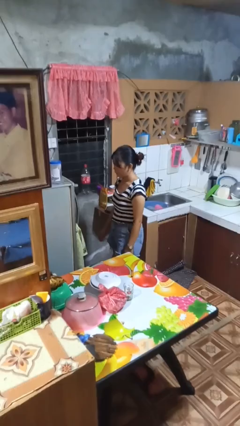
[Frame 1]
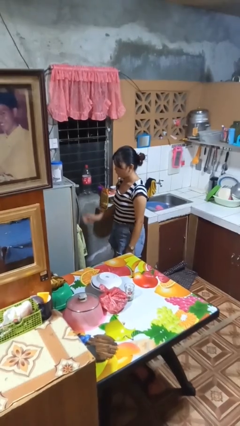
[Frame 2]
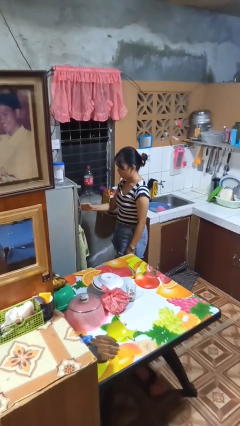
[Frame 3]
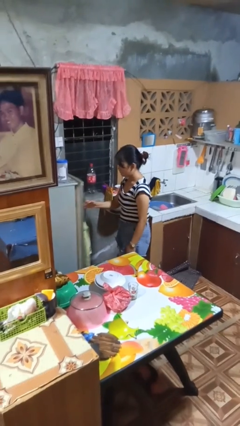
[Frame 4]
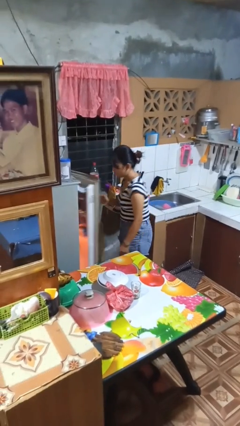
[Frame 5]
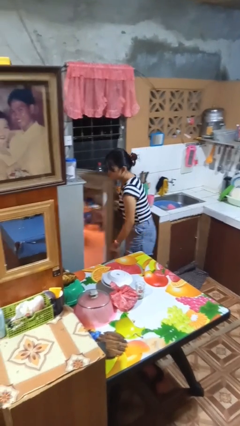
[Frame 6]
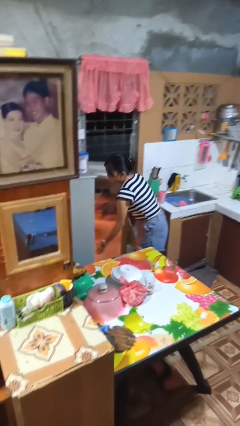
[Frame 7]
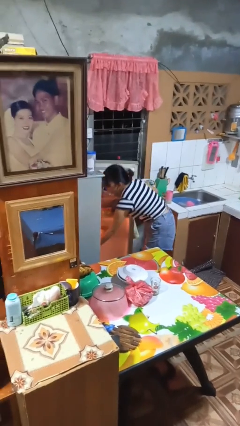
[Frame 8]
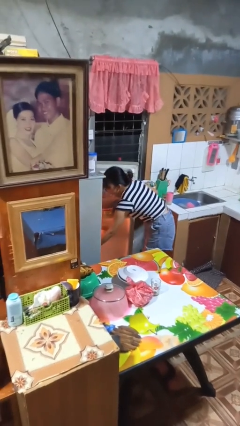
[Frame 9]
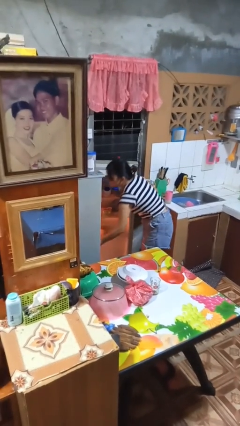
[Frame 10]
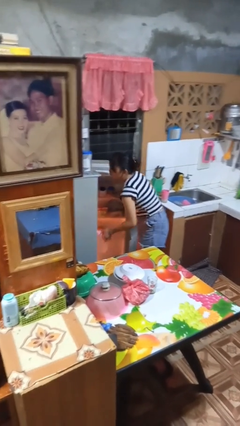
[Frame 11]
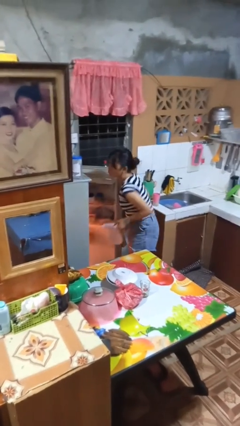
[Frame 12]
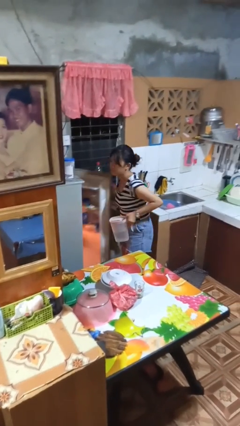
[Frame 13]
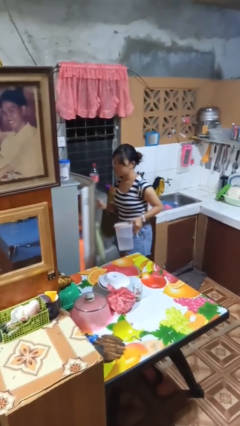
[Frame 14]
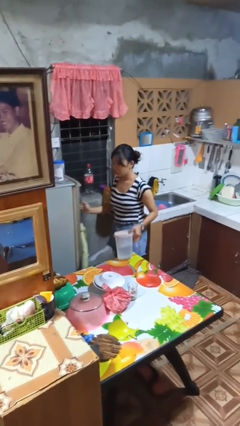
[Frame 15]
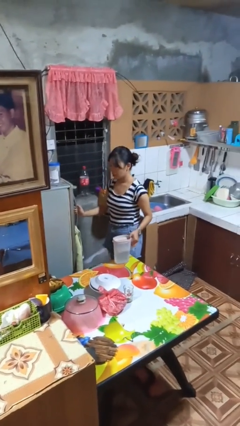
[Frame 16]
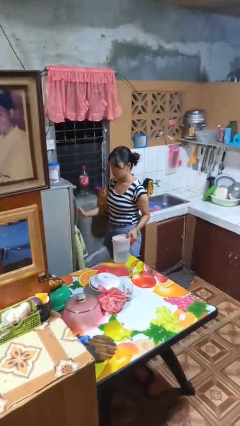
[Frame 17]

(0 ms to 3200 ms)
person takes object from refrigerator

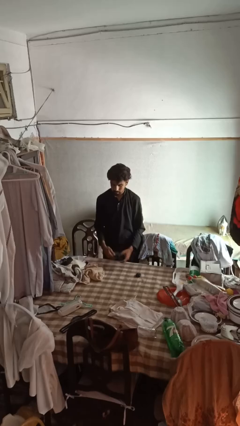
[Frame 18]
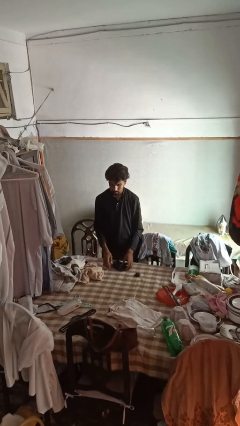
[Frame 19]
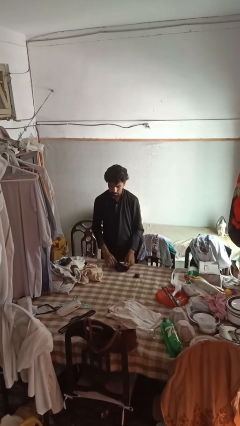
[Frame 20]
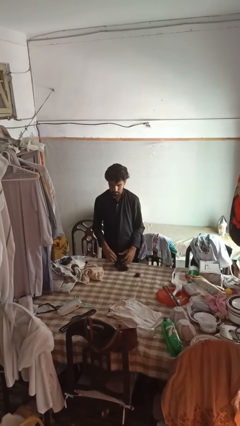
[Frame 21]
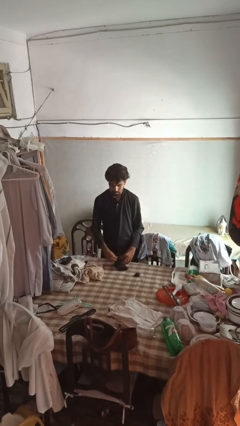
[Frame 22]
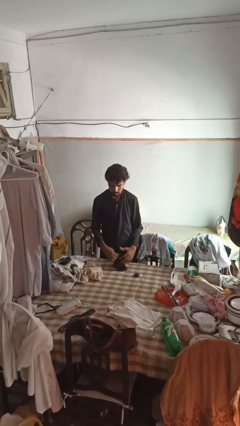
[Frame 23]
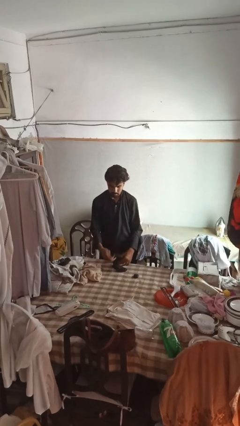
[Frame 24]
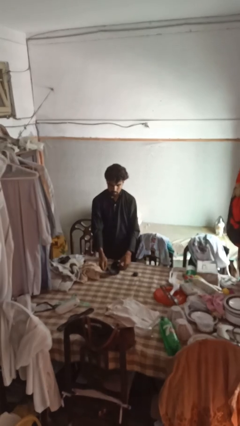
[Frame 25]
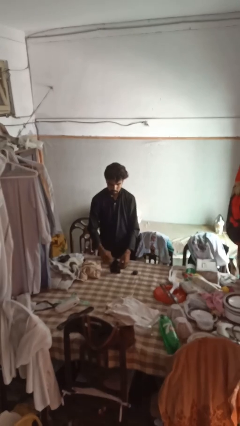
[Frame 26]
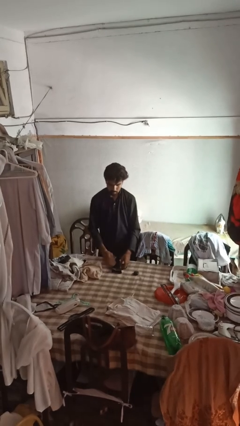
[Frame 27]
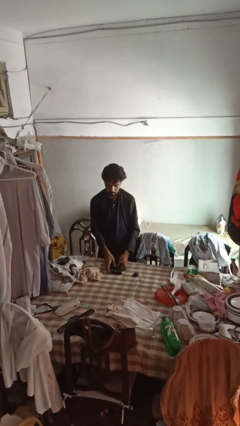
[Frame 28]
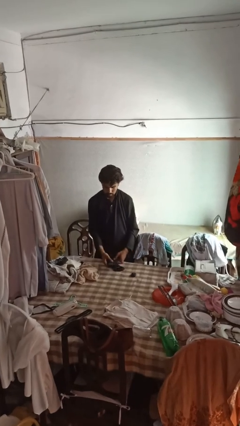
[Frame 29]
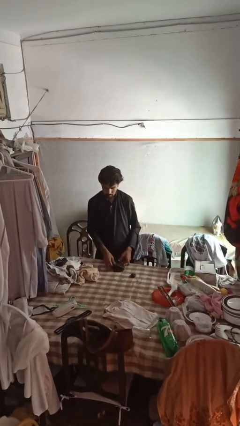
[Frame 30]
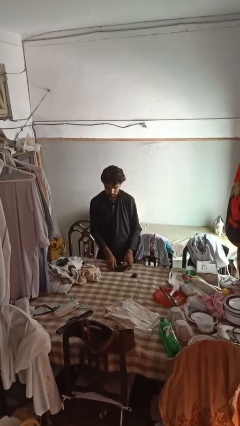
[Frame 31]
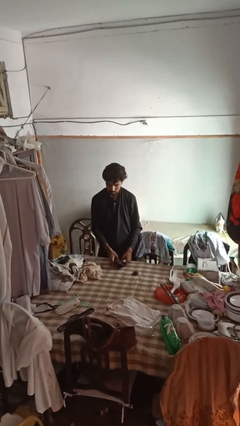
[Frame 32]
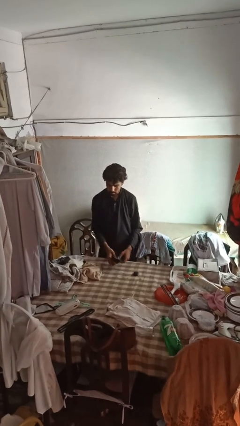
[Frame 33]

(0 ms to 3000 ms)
person folds socks

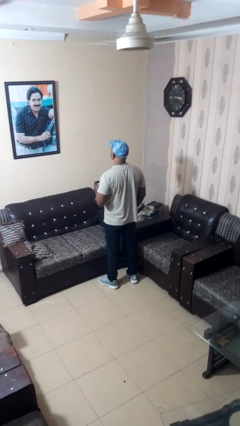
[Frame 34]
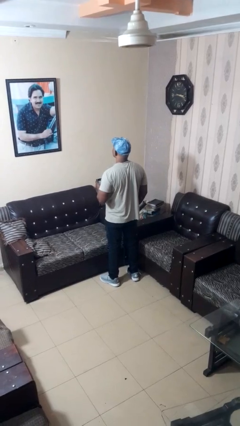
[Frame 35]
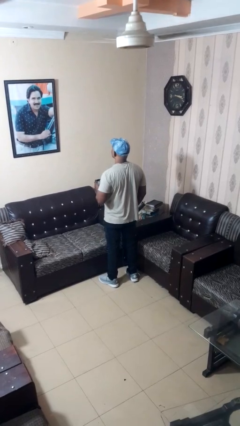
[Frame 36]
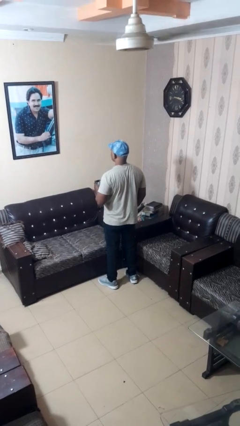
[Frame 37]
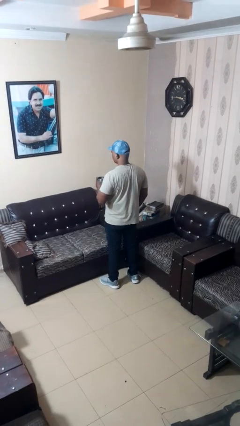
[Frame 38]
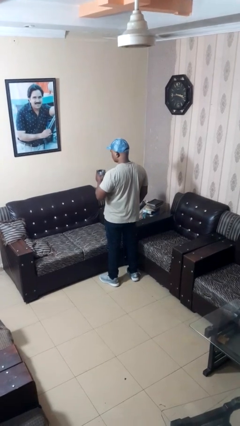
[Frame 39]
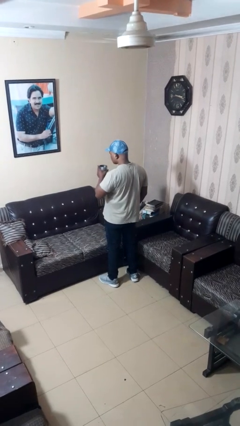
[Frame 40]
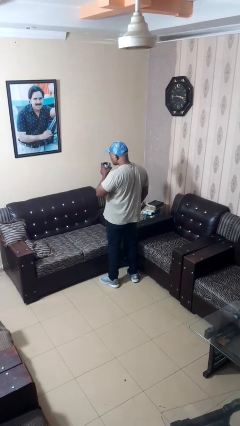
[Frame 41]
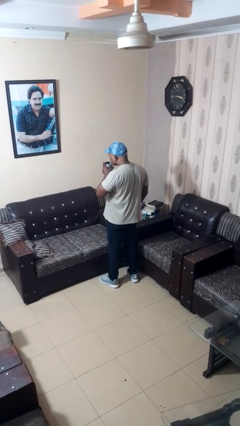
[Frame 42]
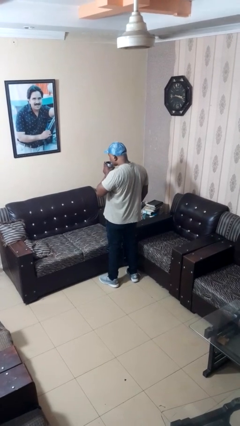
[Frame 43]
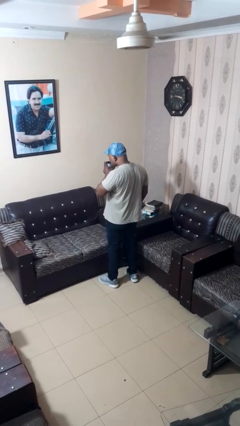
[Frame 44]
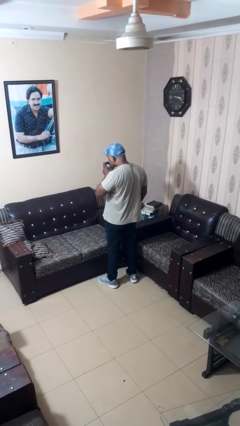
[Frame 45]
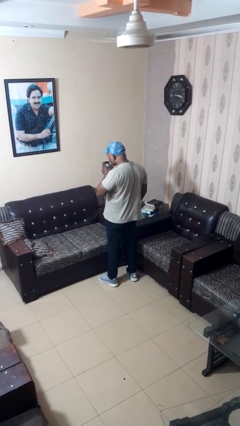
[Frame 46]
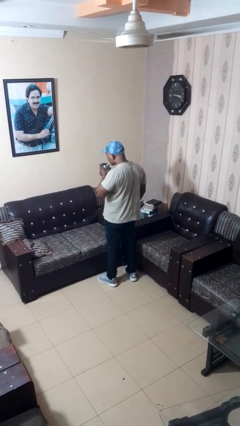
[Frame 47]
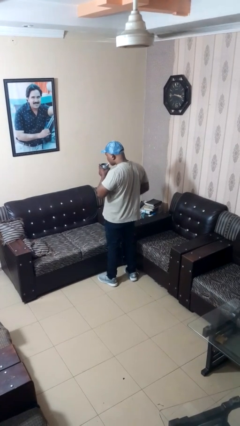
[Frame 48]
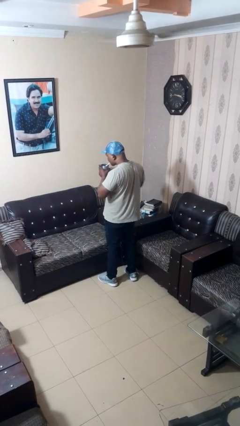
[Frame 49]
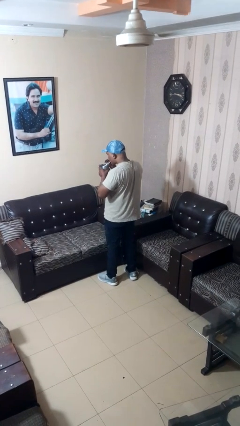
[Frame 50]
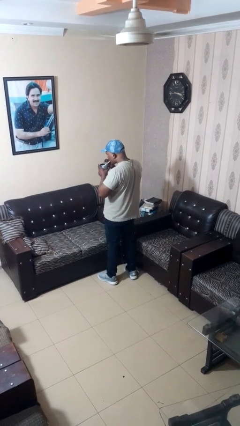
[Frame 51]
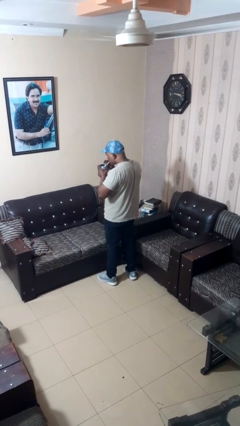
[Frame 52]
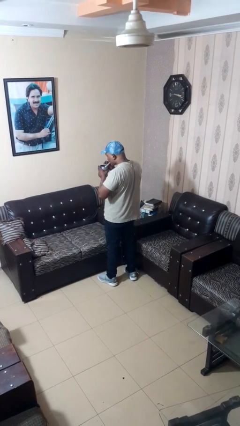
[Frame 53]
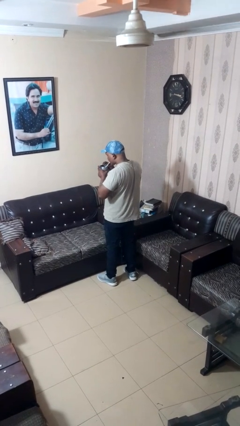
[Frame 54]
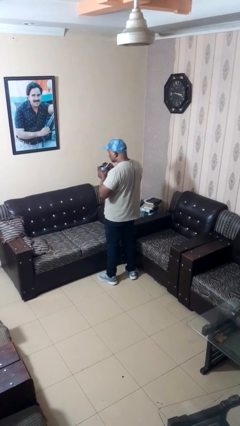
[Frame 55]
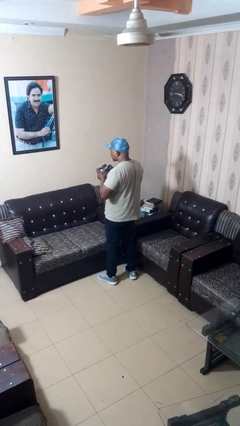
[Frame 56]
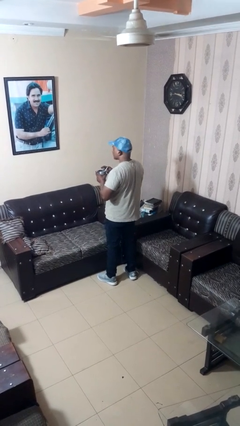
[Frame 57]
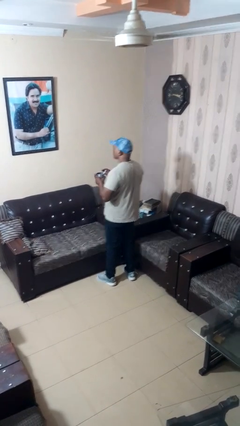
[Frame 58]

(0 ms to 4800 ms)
person drinks from straw

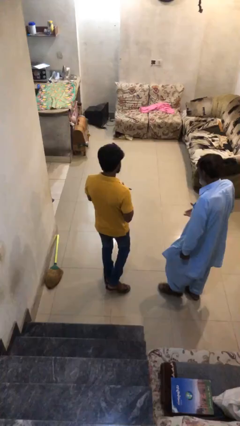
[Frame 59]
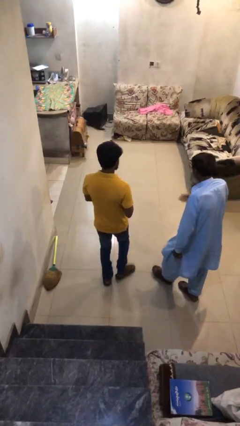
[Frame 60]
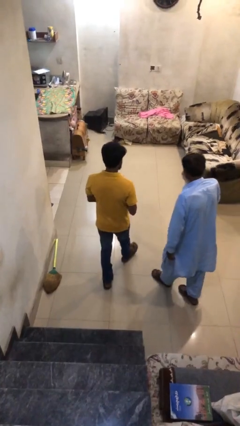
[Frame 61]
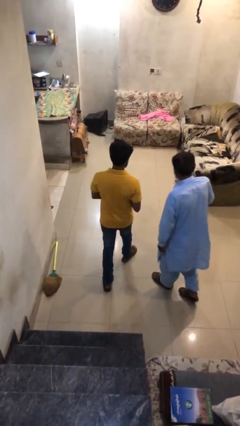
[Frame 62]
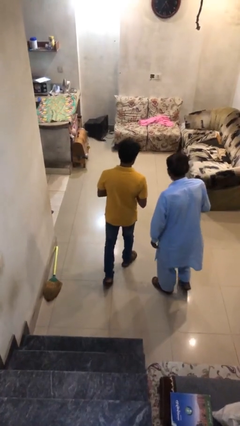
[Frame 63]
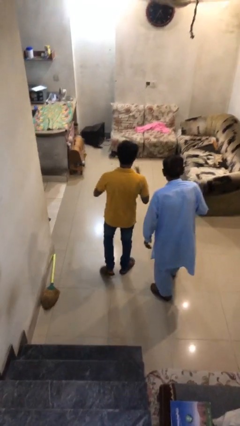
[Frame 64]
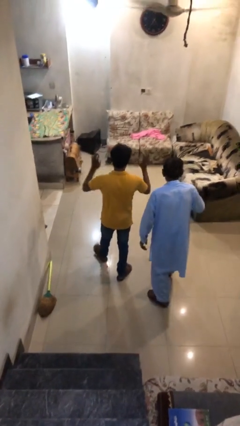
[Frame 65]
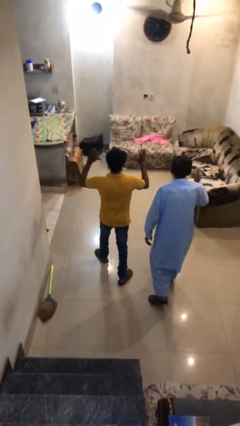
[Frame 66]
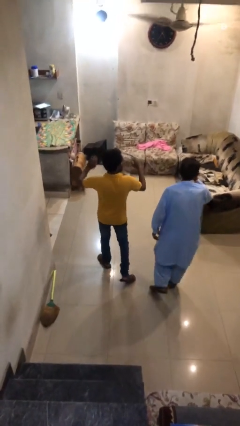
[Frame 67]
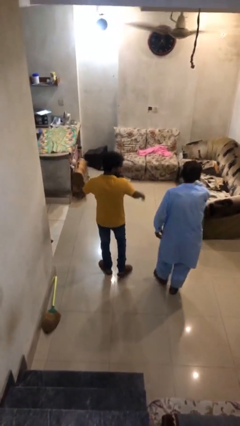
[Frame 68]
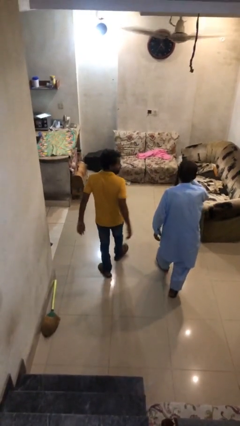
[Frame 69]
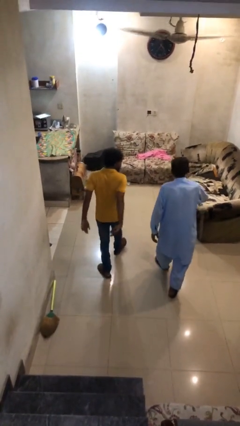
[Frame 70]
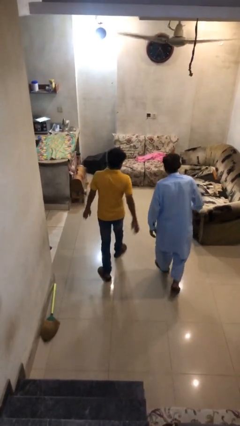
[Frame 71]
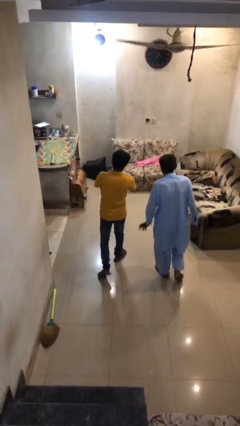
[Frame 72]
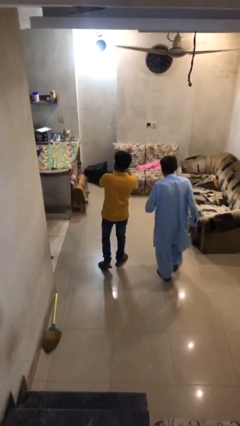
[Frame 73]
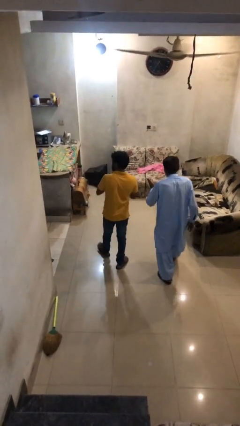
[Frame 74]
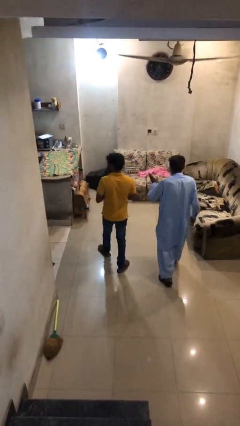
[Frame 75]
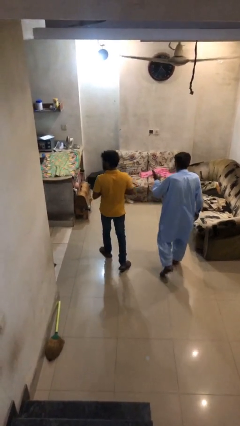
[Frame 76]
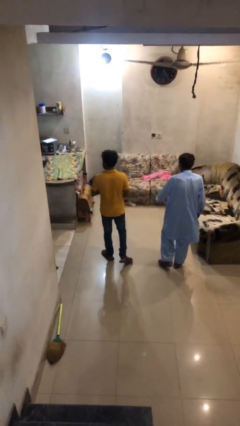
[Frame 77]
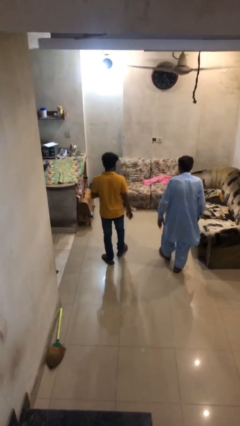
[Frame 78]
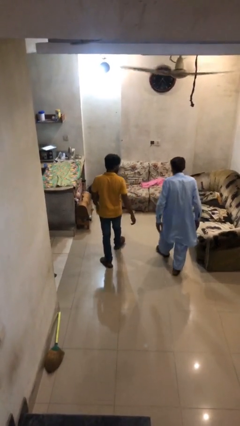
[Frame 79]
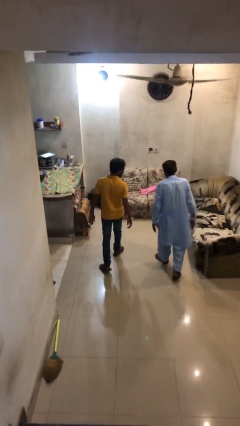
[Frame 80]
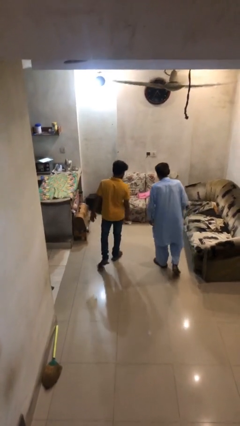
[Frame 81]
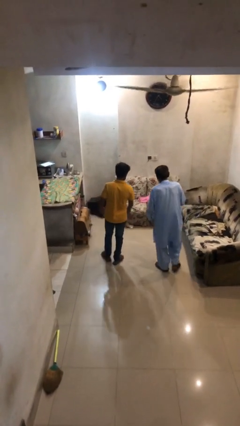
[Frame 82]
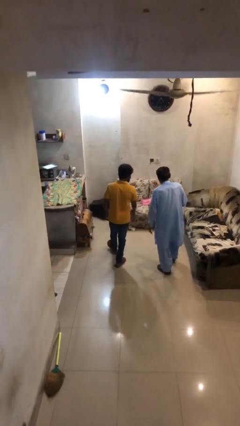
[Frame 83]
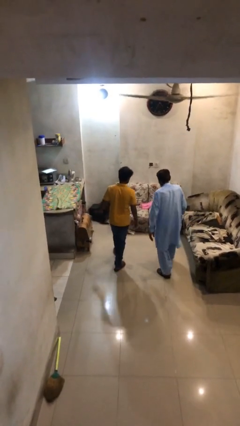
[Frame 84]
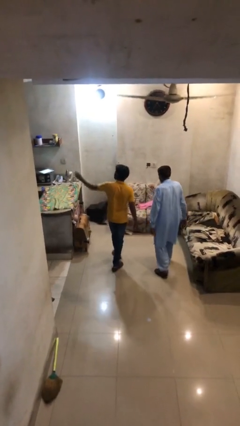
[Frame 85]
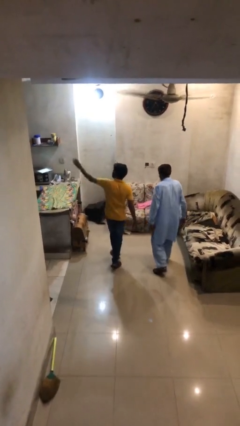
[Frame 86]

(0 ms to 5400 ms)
person talks to person

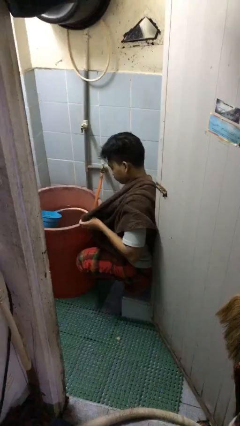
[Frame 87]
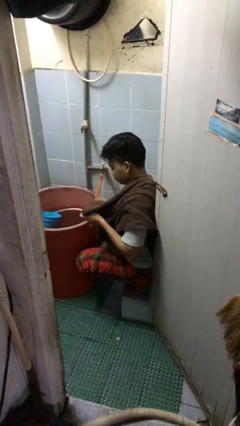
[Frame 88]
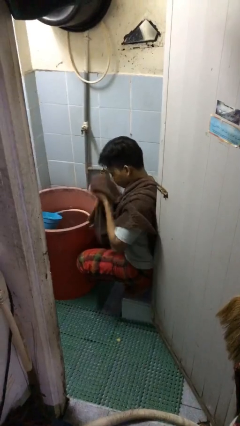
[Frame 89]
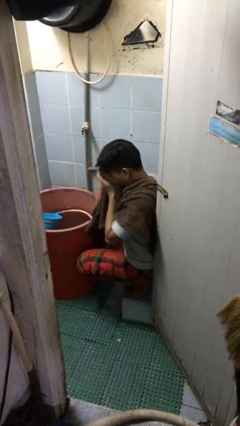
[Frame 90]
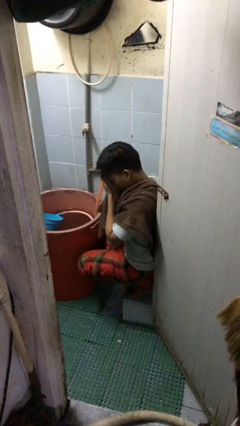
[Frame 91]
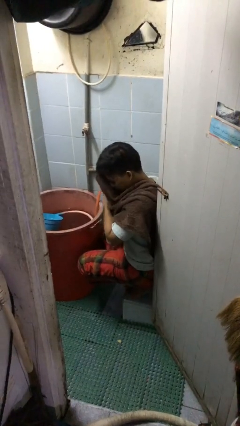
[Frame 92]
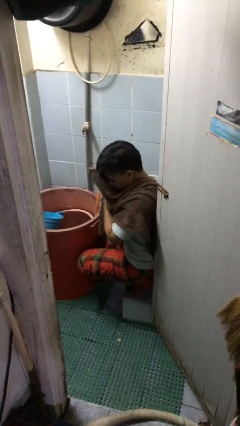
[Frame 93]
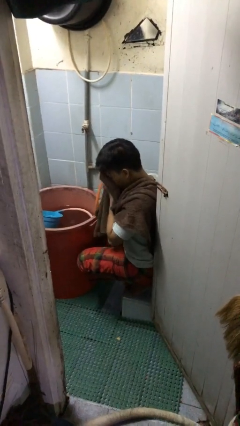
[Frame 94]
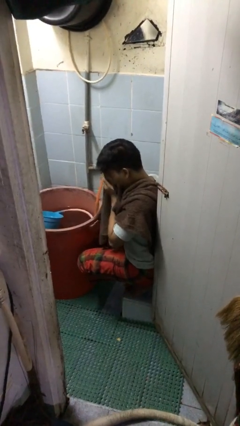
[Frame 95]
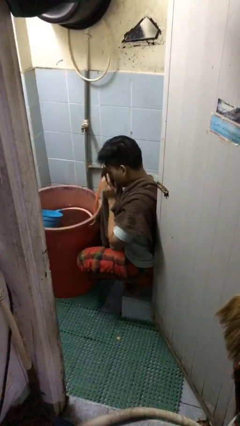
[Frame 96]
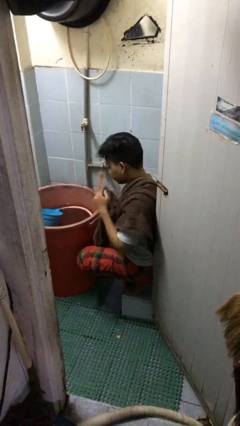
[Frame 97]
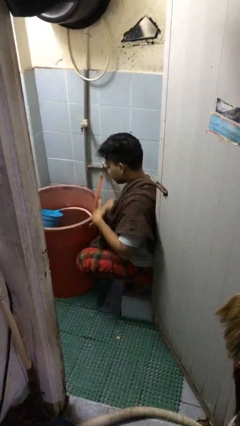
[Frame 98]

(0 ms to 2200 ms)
person dries face with towel
